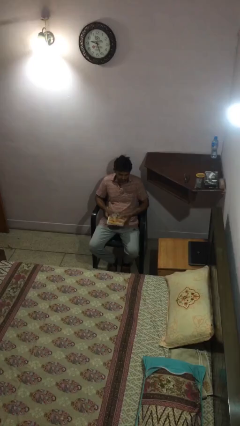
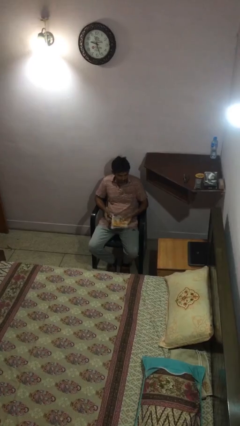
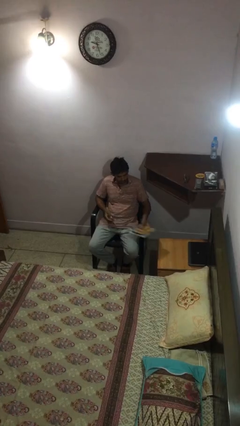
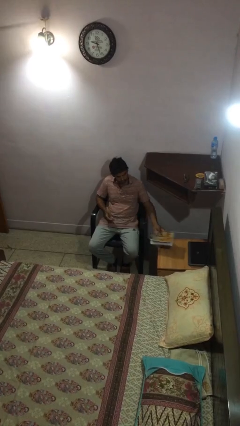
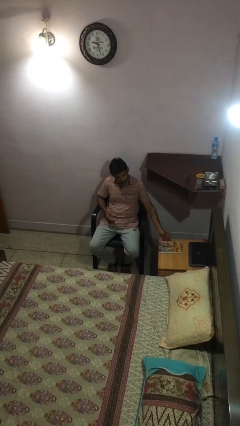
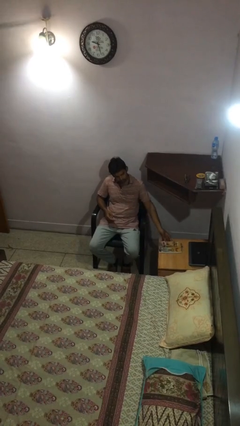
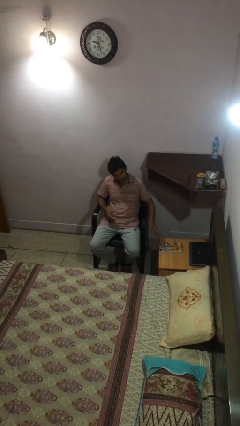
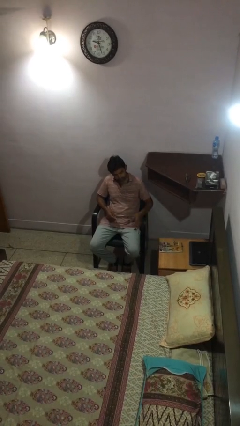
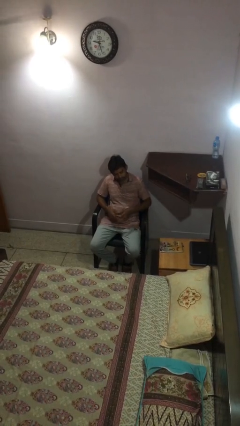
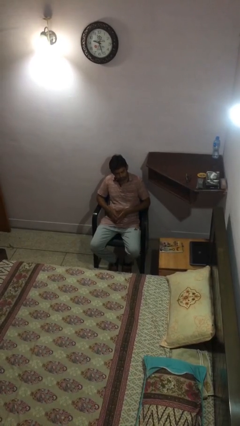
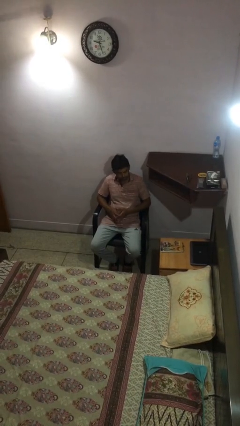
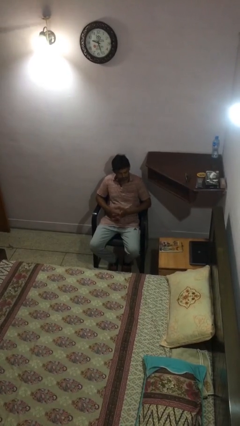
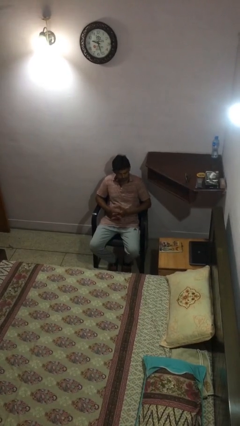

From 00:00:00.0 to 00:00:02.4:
person puts down object on table

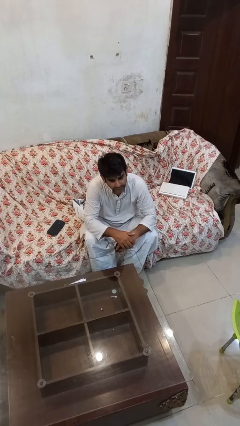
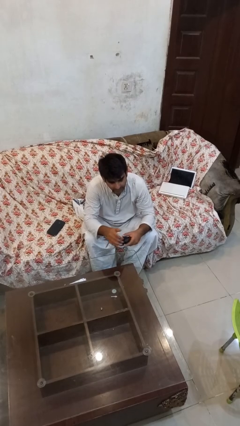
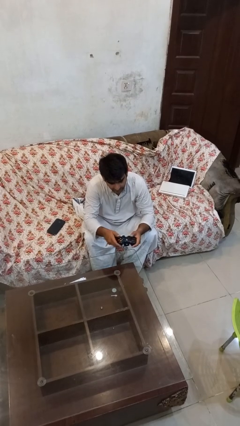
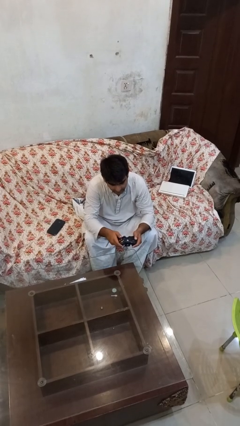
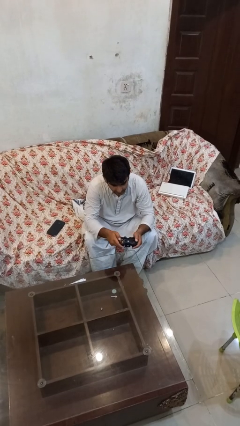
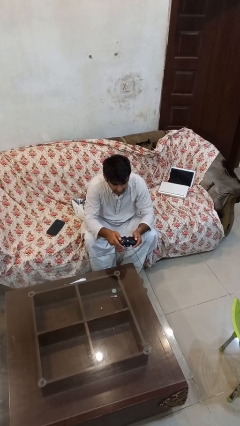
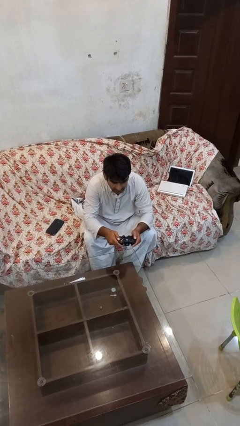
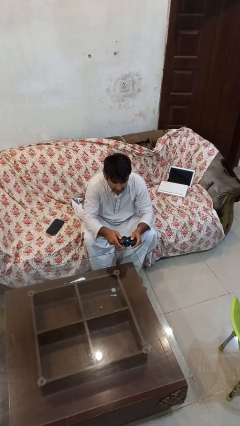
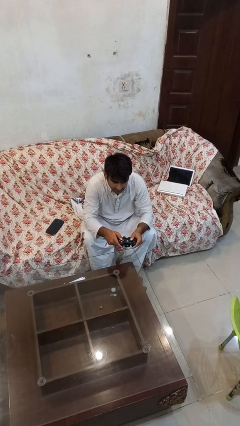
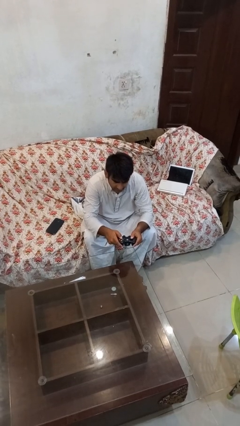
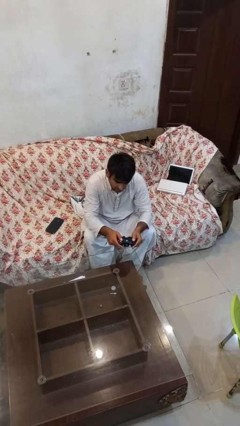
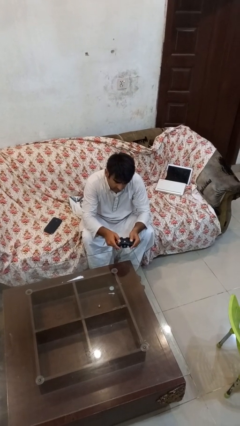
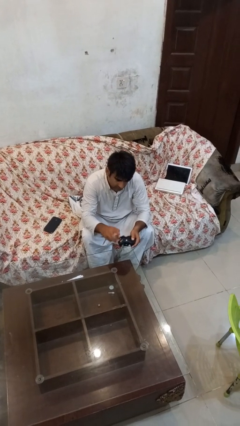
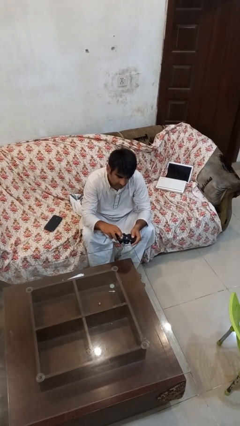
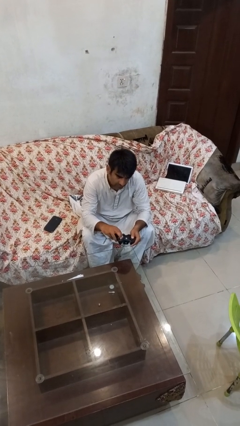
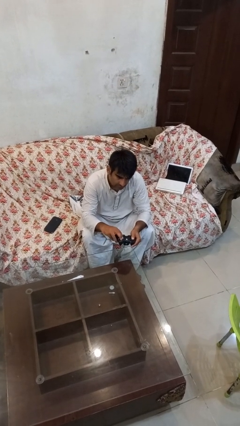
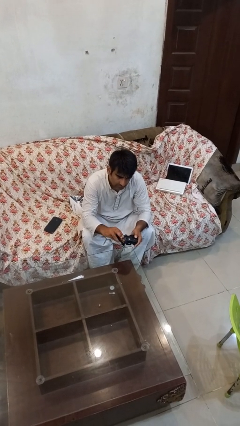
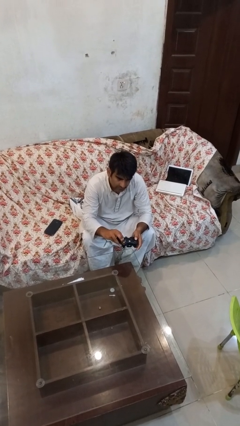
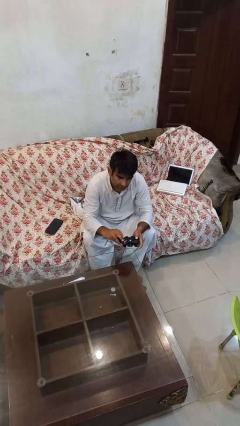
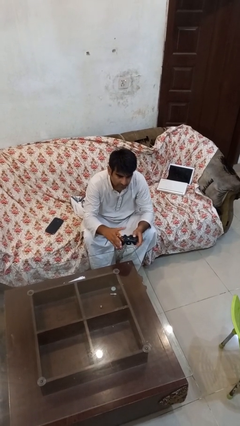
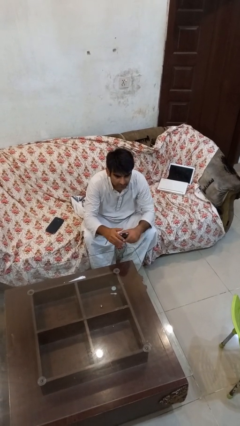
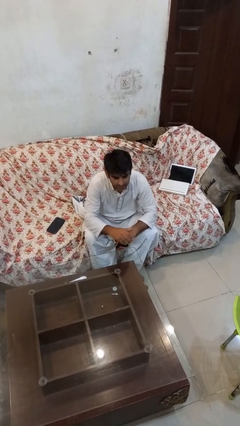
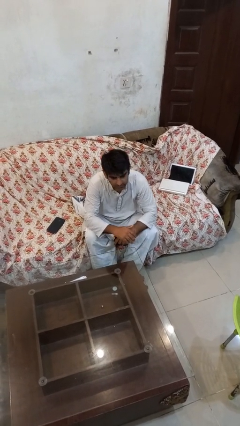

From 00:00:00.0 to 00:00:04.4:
person interacts with handheld game

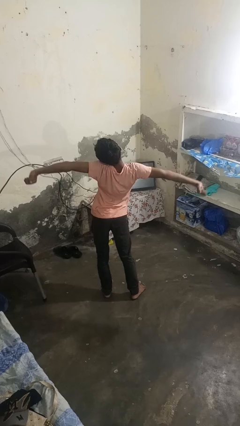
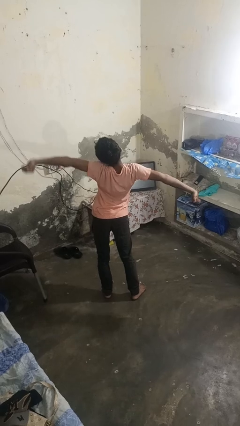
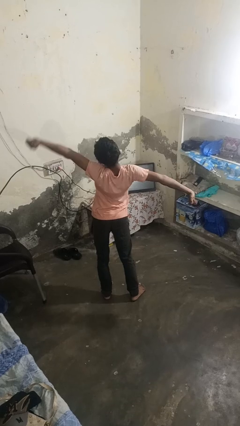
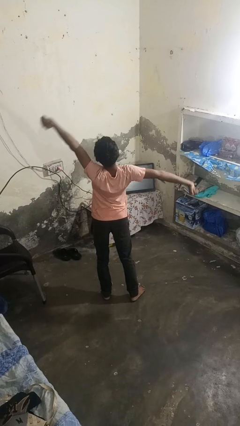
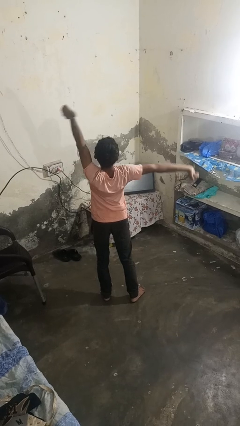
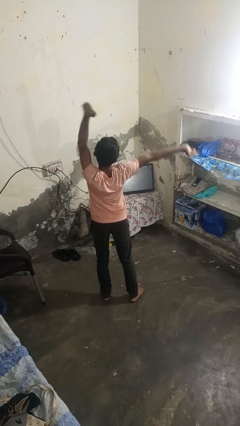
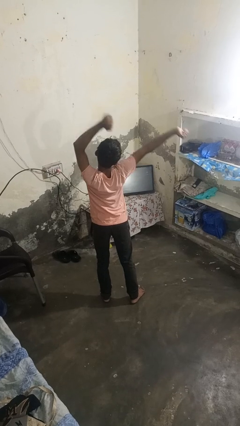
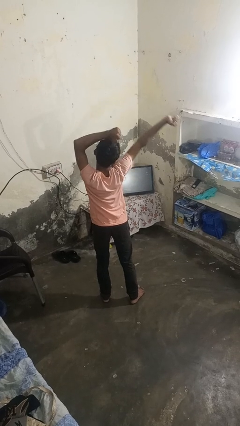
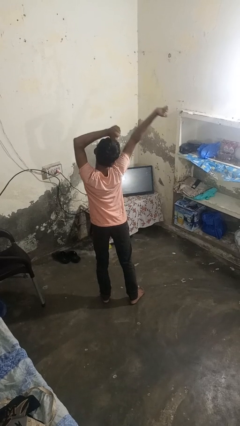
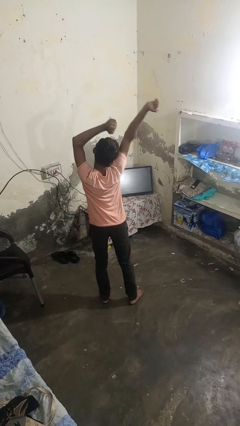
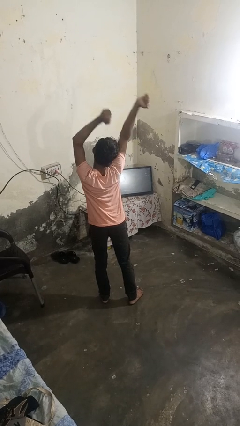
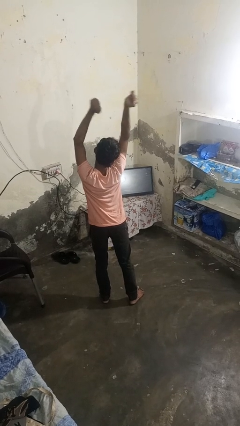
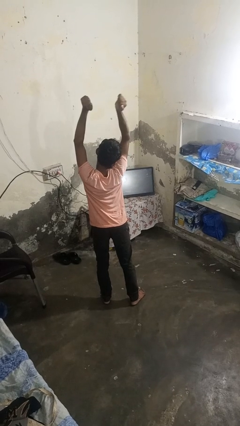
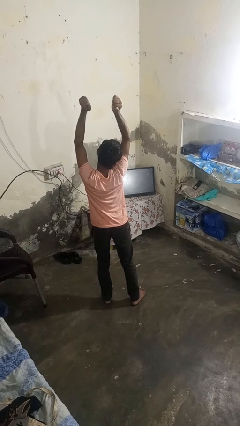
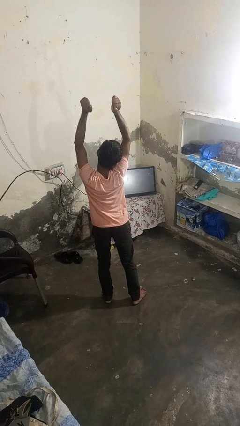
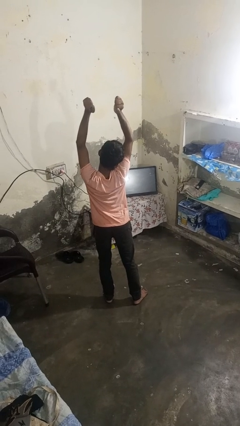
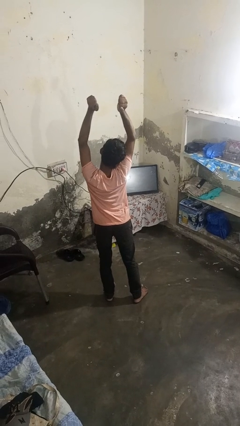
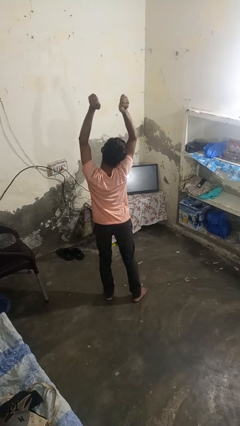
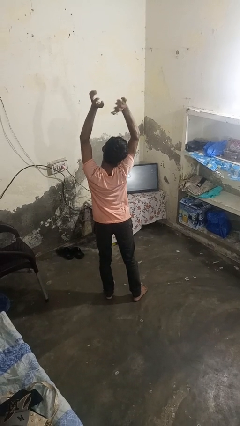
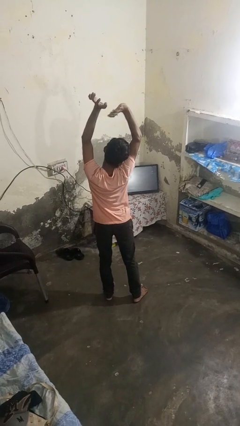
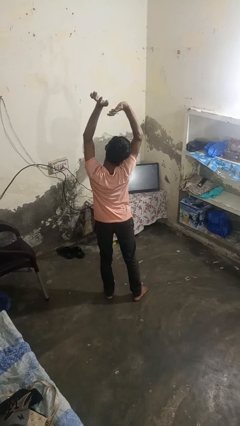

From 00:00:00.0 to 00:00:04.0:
person stretches arms over head

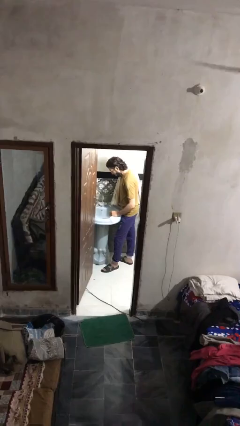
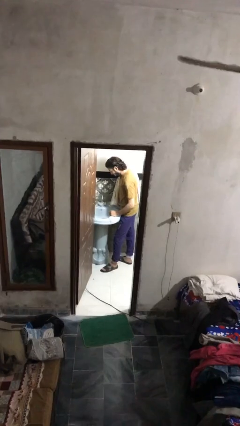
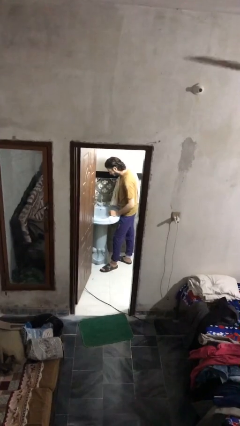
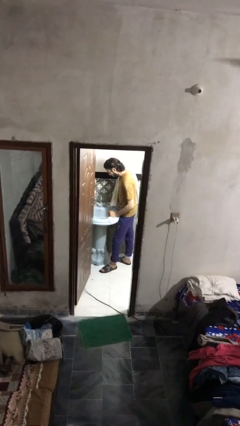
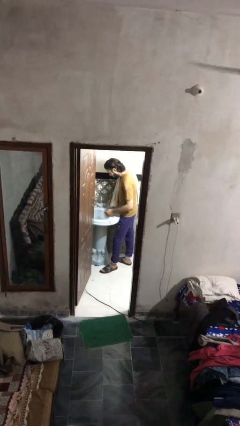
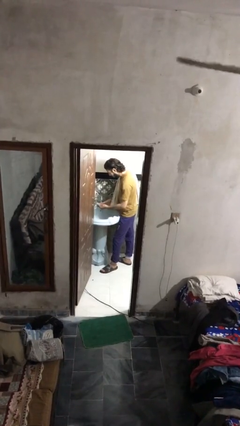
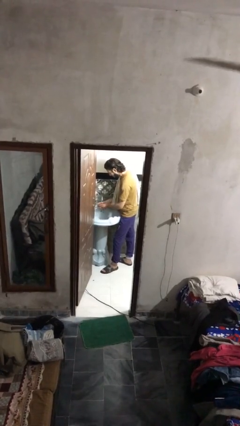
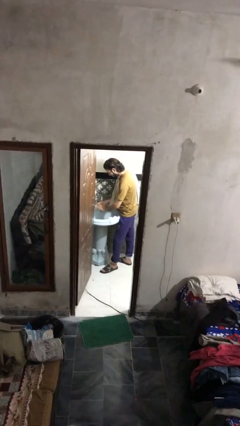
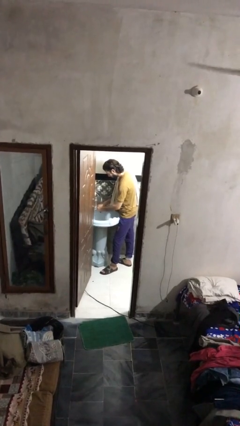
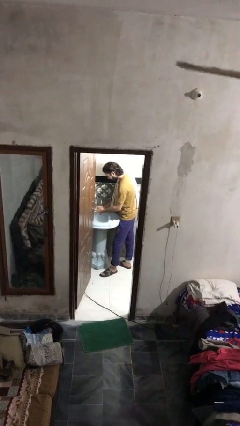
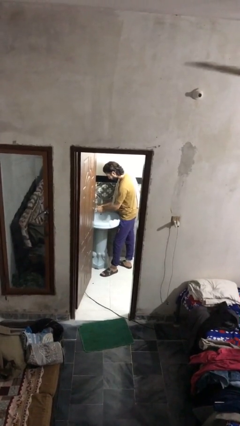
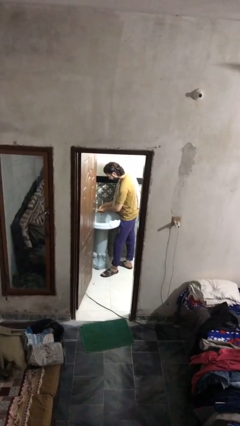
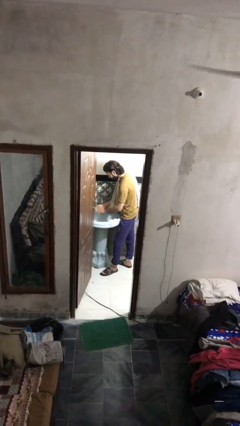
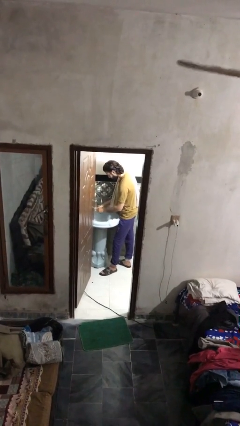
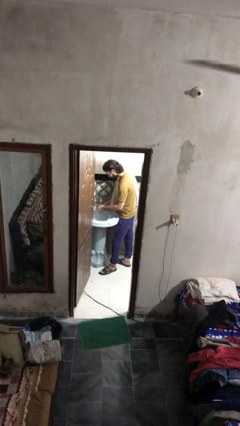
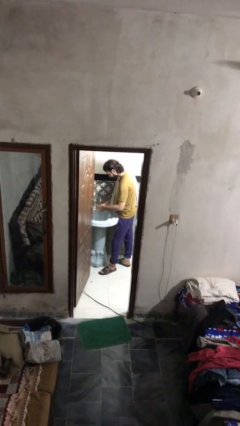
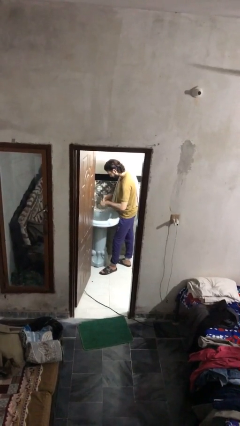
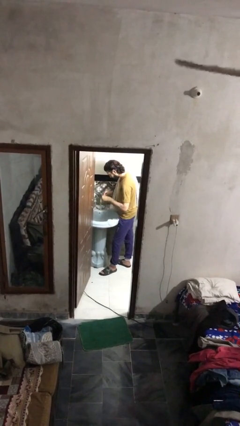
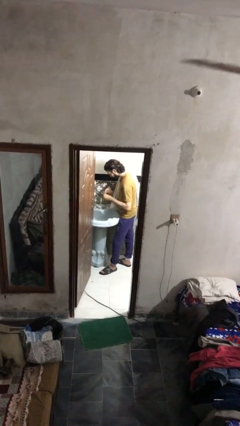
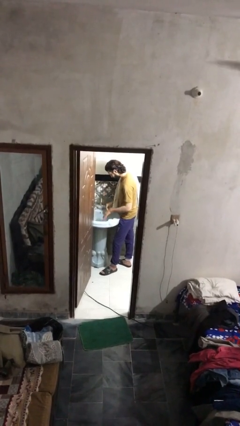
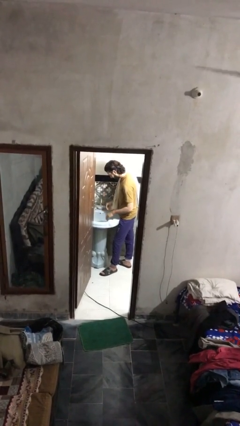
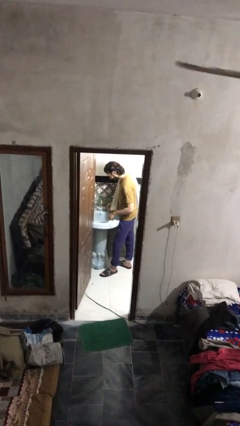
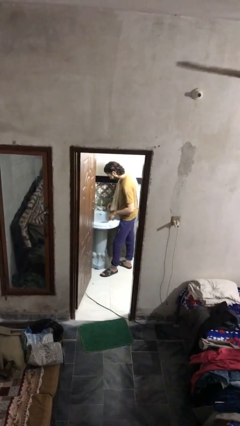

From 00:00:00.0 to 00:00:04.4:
person washes hands

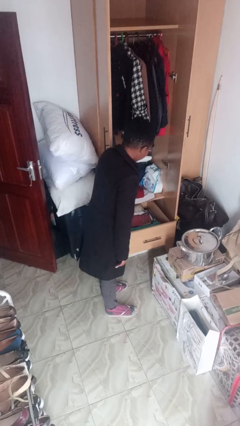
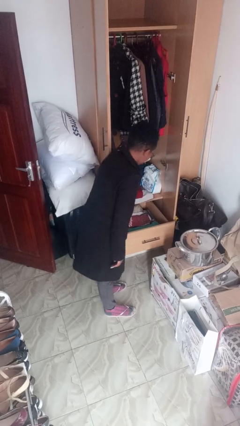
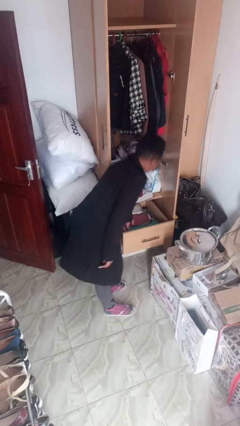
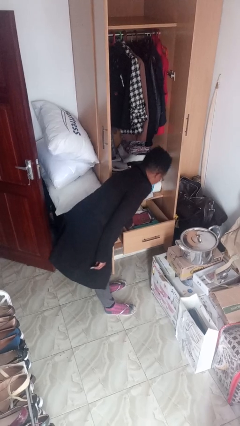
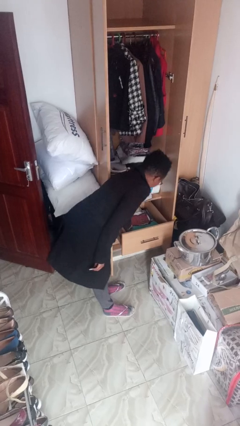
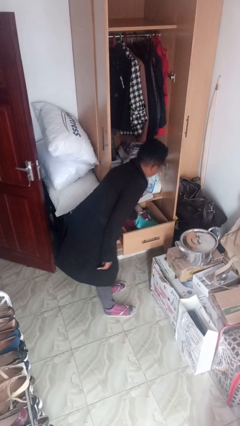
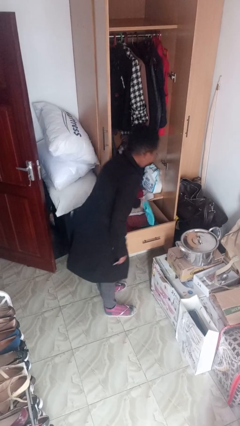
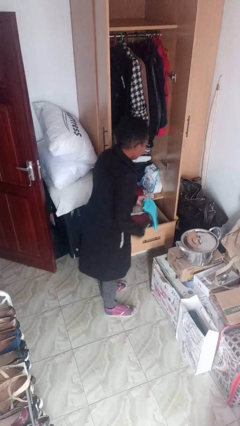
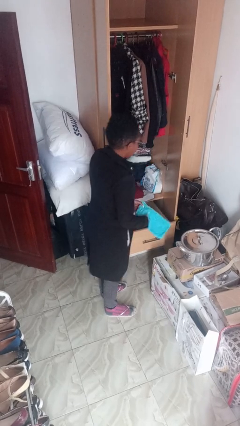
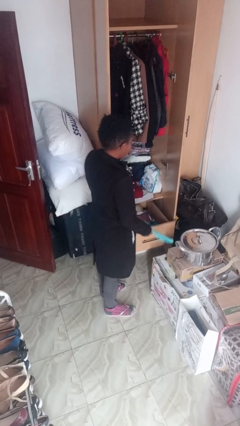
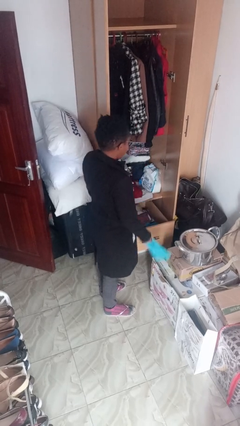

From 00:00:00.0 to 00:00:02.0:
person takes clothes from dresser
